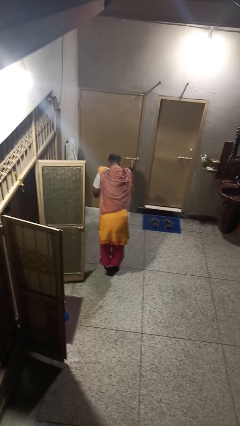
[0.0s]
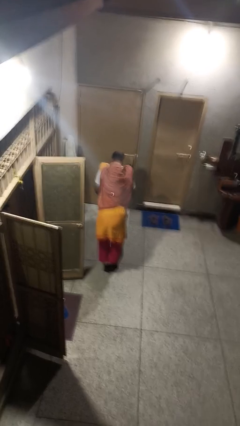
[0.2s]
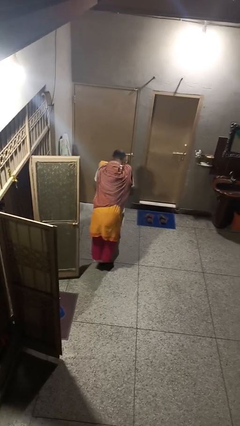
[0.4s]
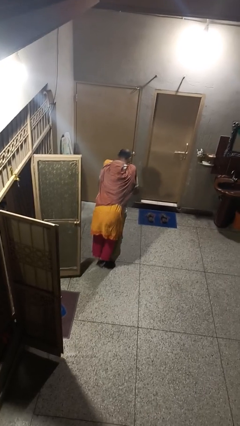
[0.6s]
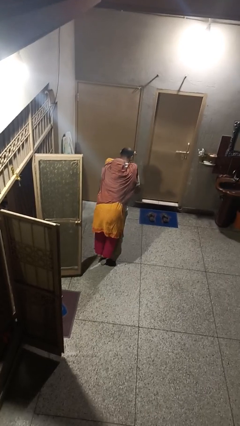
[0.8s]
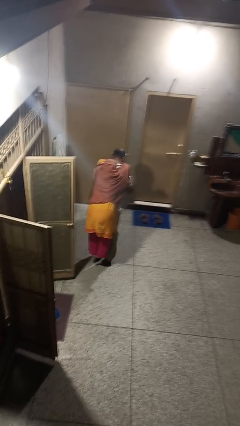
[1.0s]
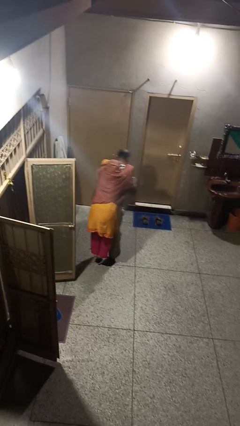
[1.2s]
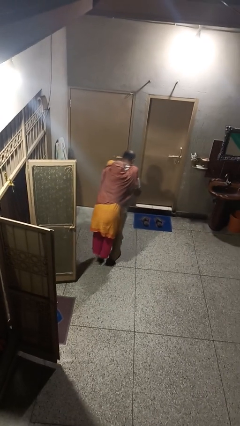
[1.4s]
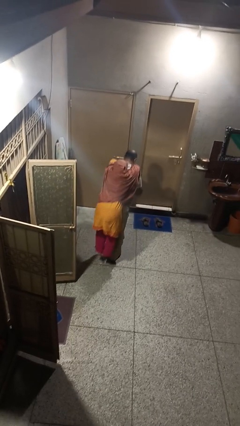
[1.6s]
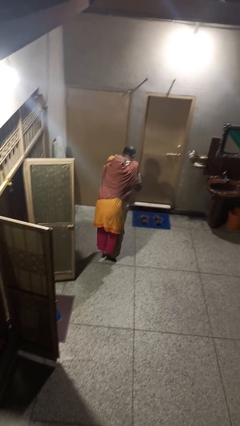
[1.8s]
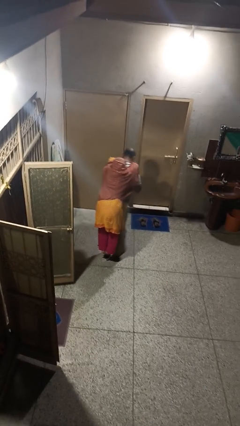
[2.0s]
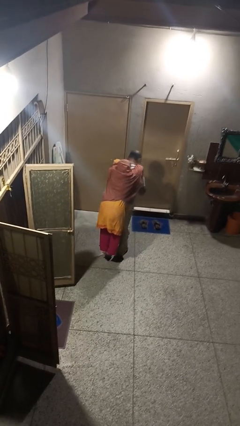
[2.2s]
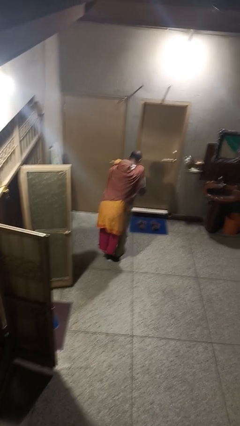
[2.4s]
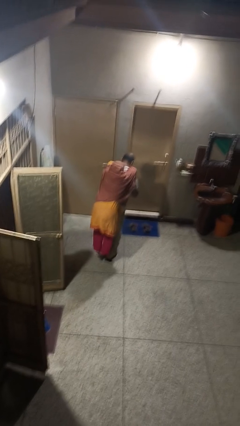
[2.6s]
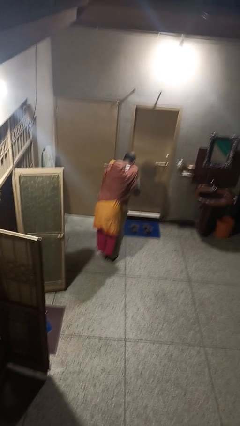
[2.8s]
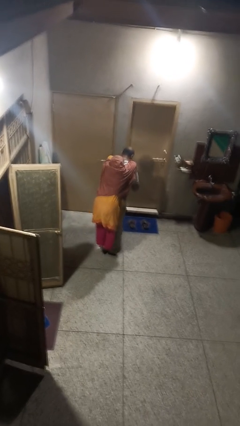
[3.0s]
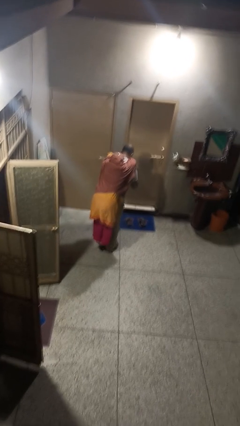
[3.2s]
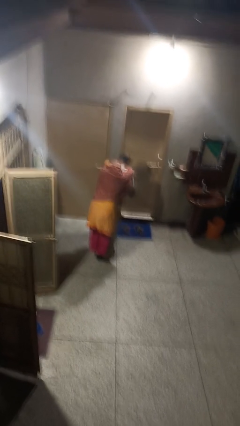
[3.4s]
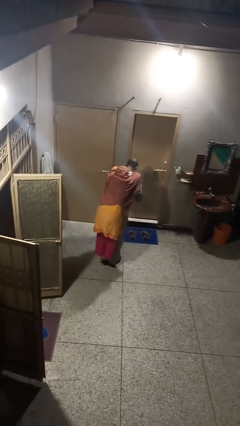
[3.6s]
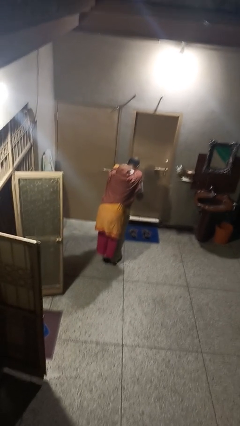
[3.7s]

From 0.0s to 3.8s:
person carries person on back

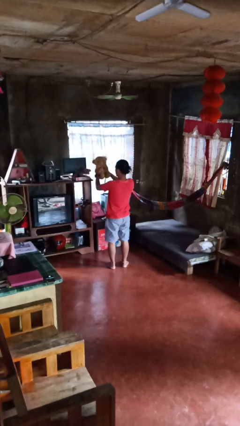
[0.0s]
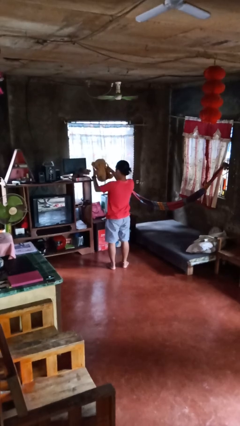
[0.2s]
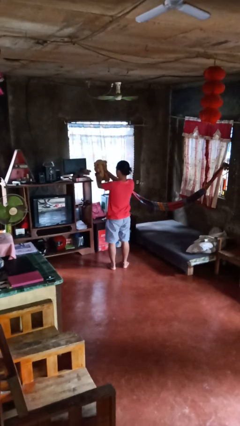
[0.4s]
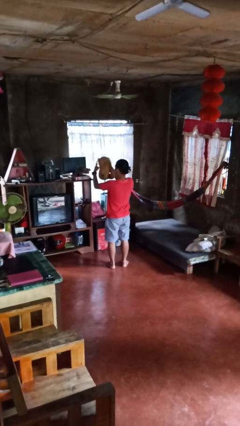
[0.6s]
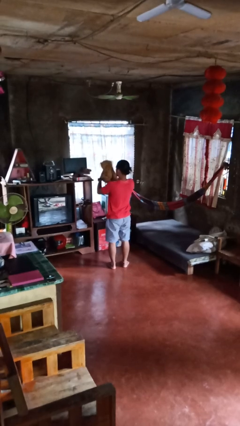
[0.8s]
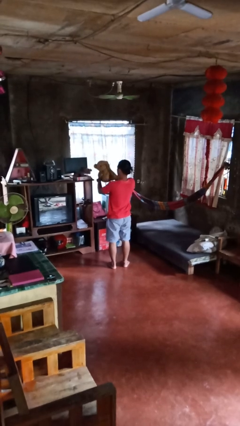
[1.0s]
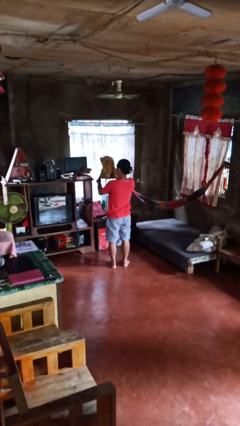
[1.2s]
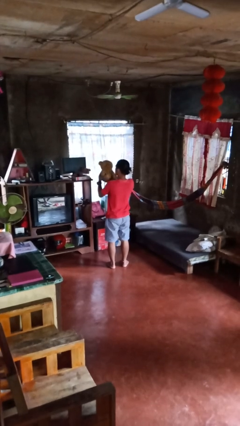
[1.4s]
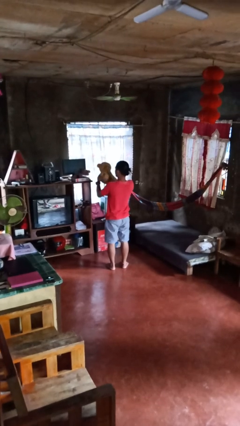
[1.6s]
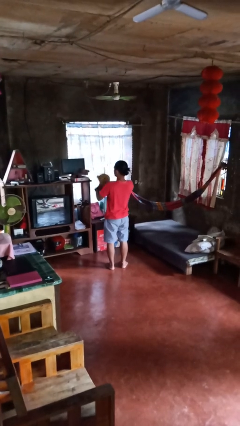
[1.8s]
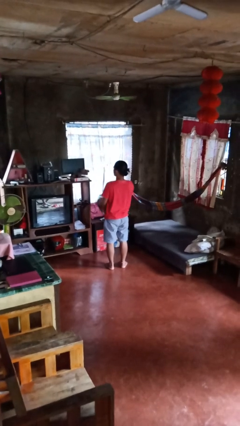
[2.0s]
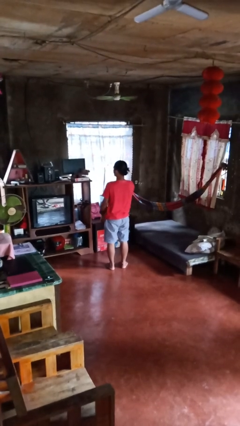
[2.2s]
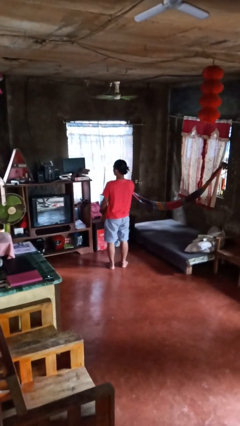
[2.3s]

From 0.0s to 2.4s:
person squeezes object
